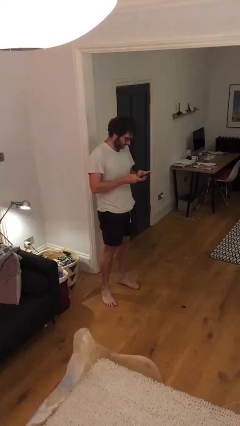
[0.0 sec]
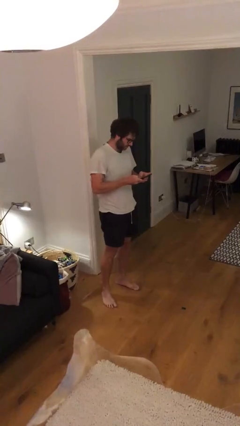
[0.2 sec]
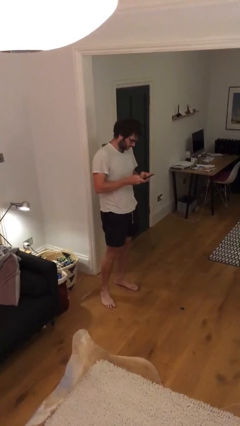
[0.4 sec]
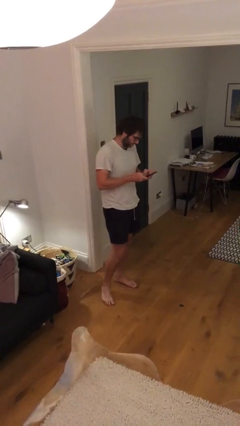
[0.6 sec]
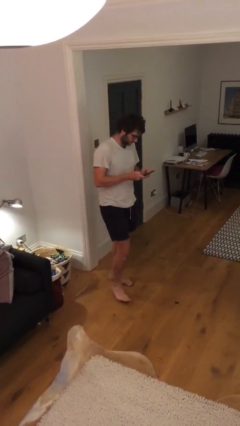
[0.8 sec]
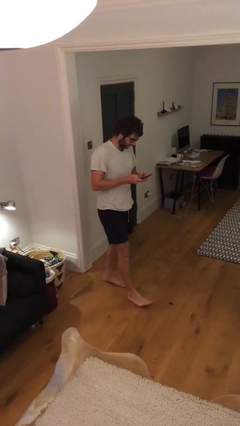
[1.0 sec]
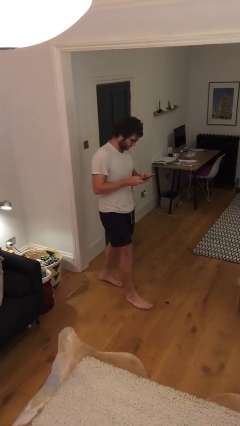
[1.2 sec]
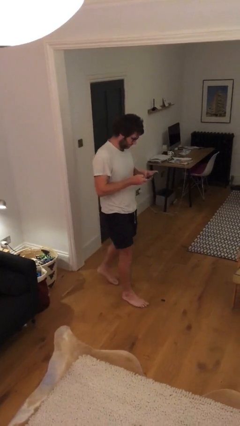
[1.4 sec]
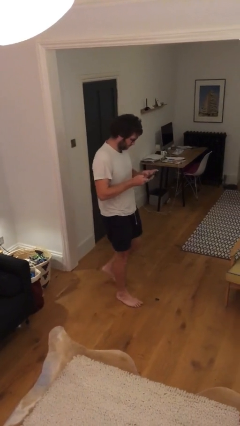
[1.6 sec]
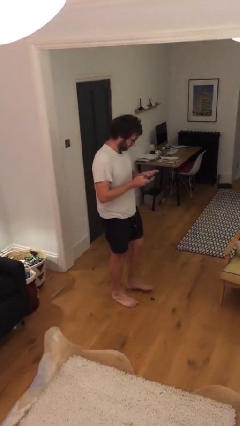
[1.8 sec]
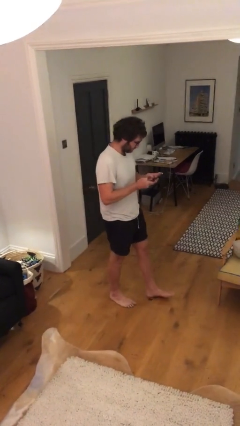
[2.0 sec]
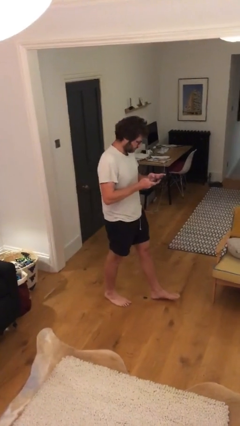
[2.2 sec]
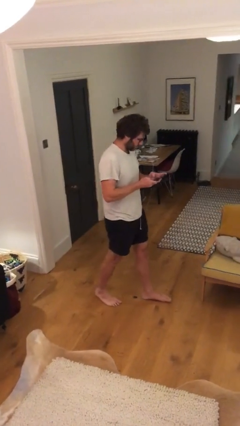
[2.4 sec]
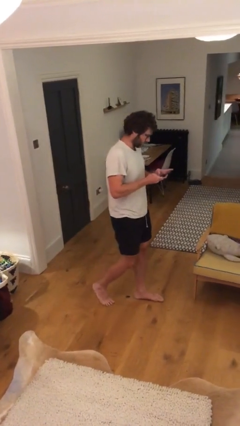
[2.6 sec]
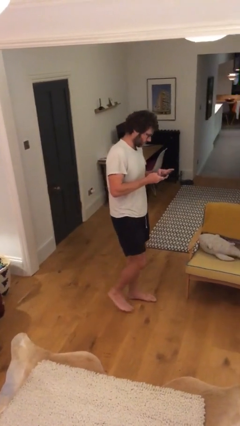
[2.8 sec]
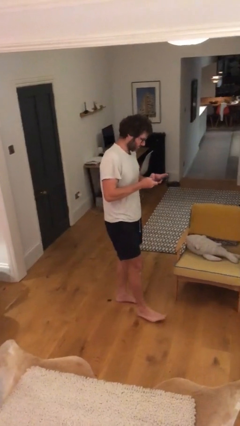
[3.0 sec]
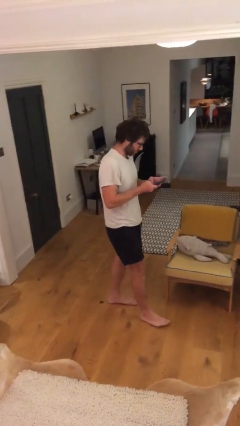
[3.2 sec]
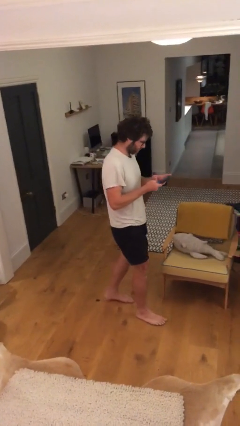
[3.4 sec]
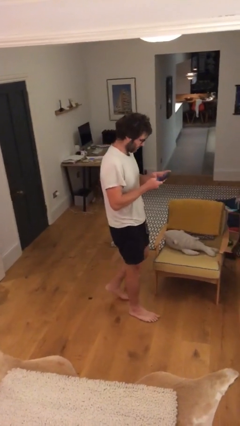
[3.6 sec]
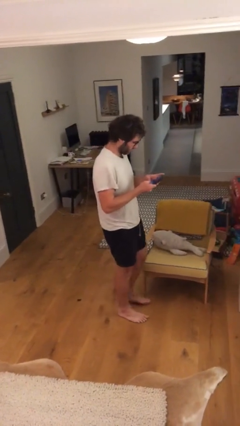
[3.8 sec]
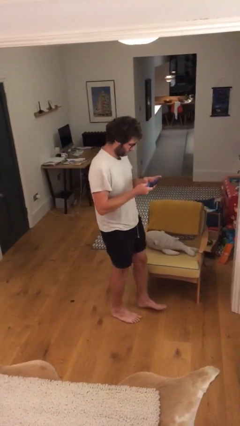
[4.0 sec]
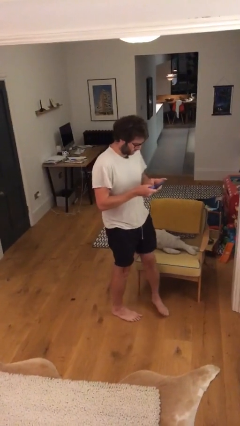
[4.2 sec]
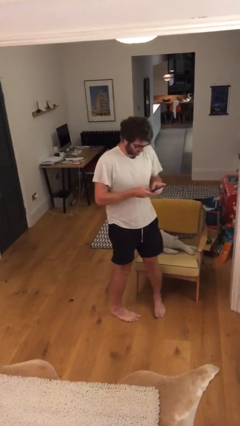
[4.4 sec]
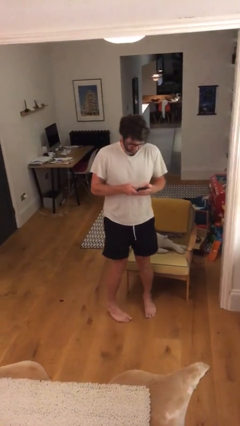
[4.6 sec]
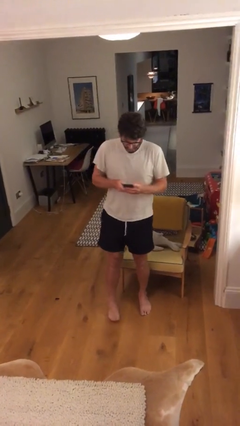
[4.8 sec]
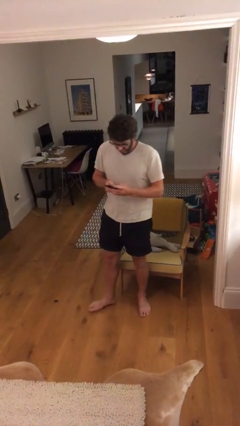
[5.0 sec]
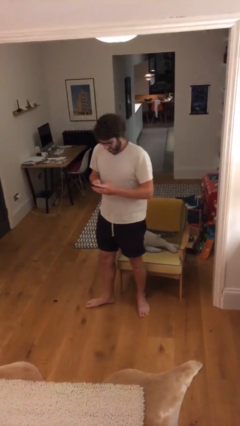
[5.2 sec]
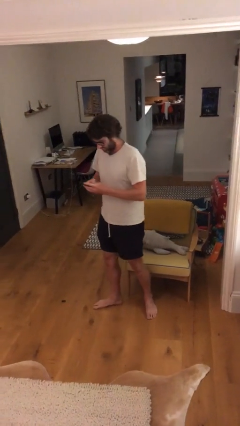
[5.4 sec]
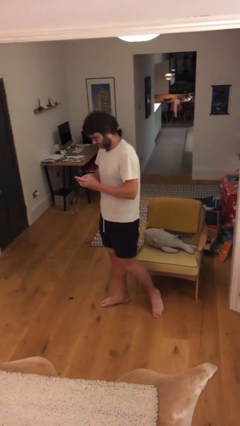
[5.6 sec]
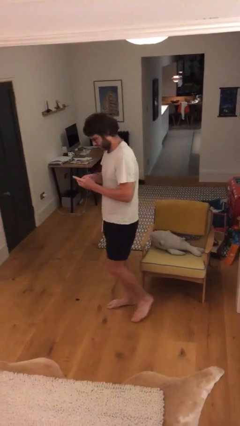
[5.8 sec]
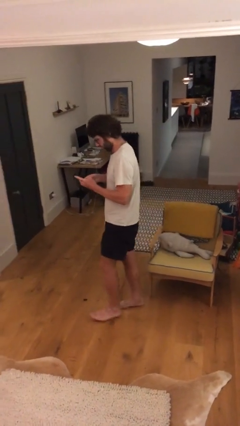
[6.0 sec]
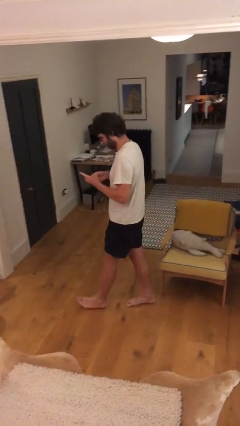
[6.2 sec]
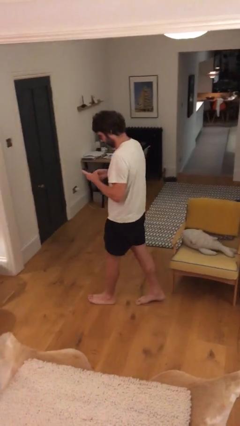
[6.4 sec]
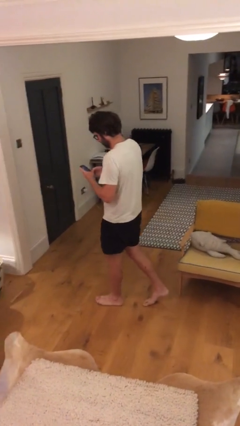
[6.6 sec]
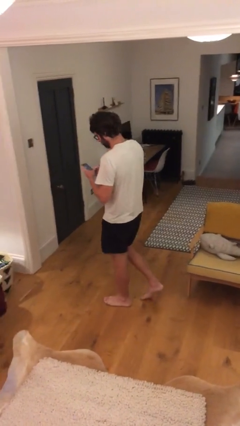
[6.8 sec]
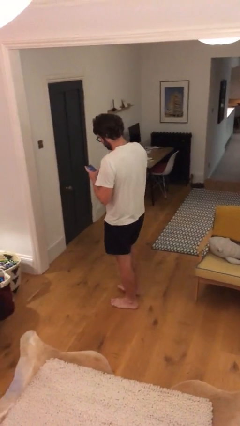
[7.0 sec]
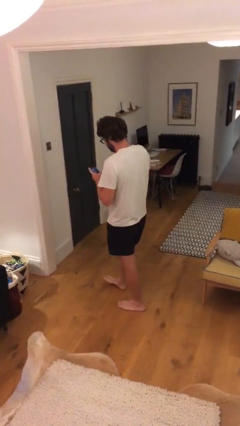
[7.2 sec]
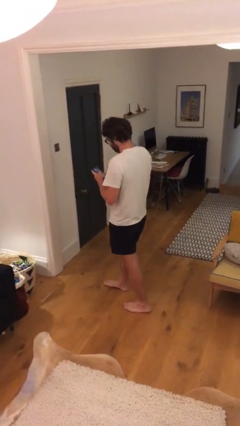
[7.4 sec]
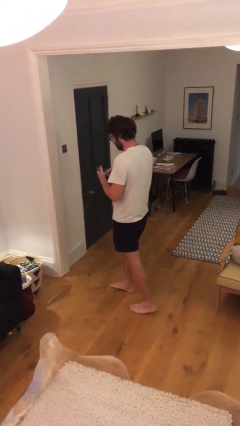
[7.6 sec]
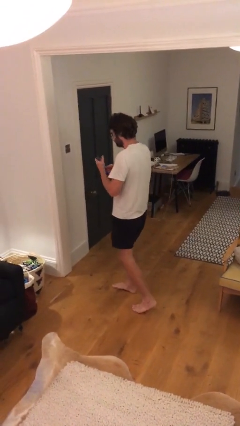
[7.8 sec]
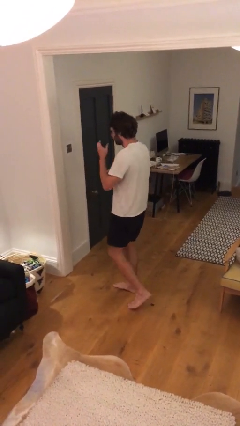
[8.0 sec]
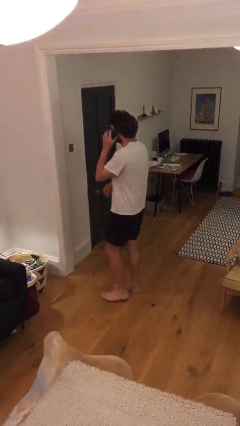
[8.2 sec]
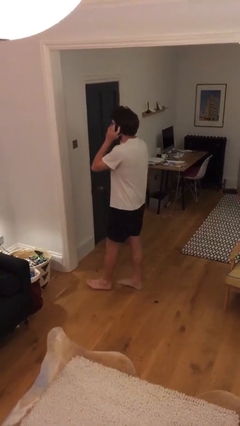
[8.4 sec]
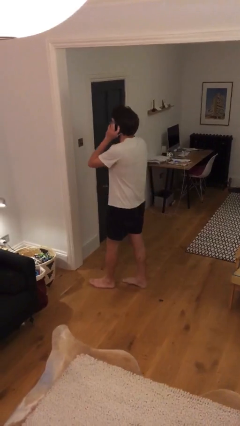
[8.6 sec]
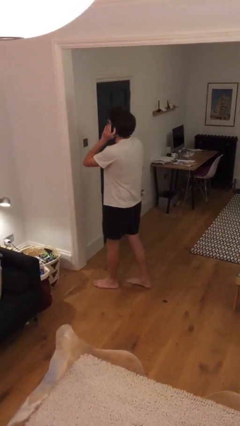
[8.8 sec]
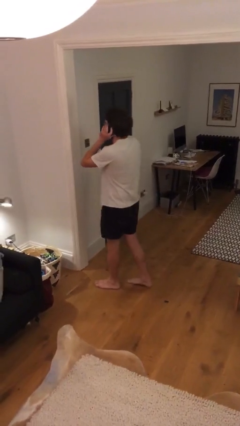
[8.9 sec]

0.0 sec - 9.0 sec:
person texts on phone

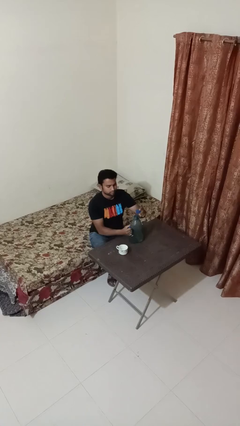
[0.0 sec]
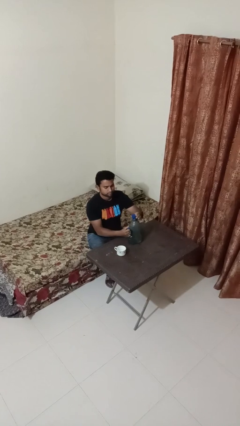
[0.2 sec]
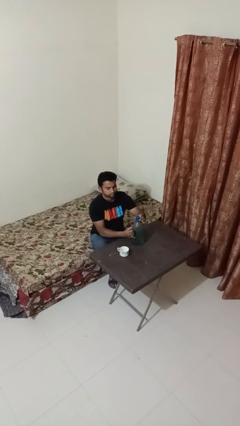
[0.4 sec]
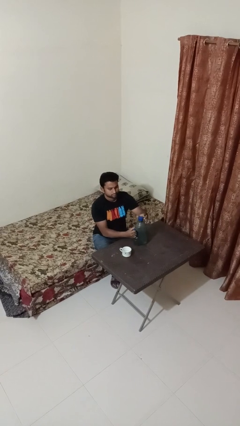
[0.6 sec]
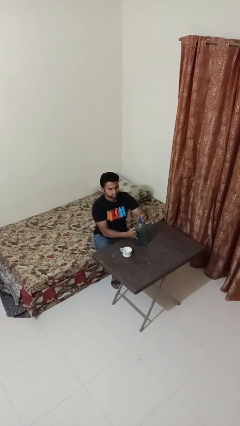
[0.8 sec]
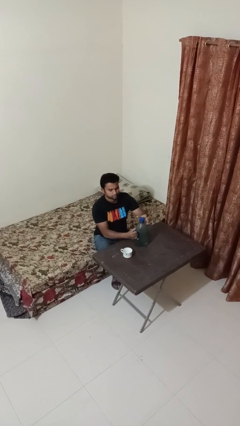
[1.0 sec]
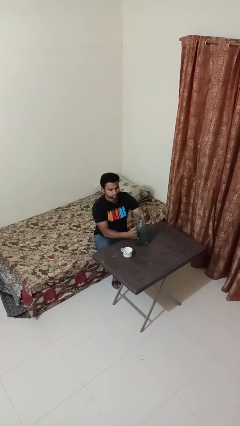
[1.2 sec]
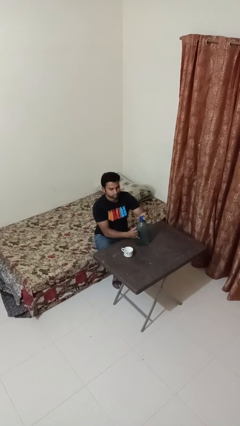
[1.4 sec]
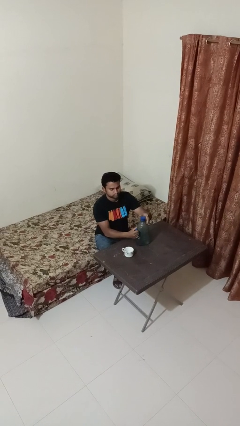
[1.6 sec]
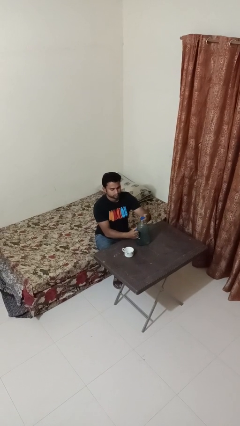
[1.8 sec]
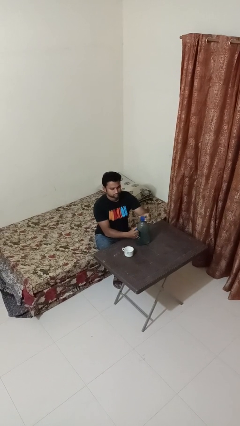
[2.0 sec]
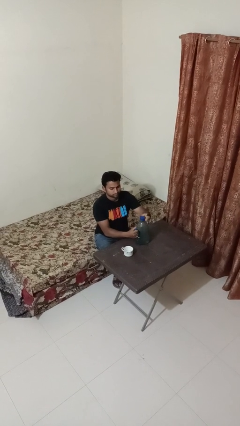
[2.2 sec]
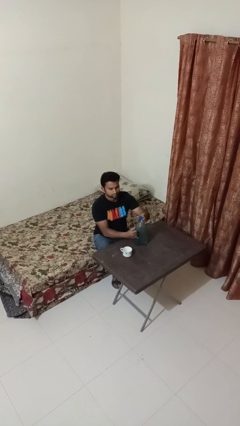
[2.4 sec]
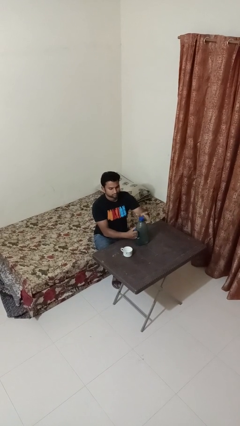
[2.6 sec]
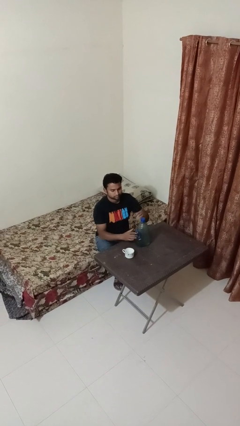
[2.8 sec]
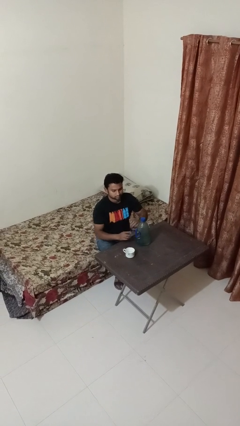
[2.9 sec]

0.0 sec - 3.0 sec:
person screws lid to bottle

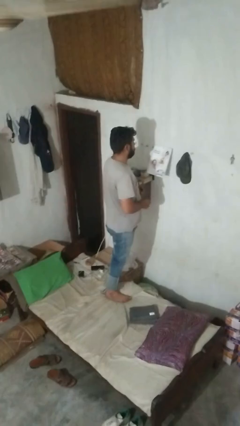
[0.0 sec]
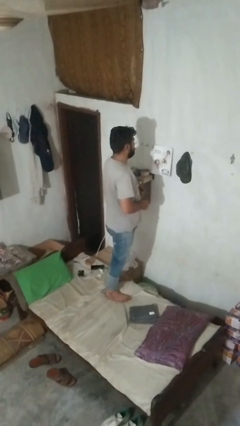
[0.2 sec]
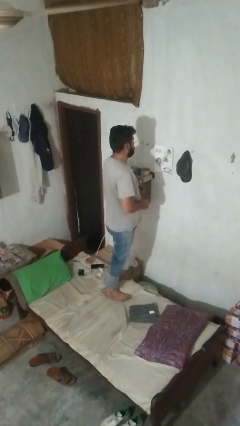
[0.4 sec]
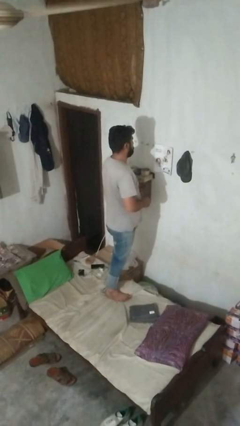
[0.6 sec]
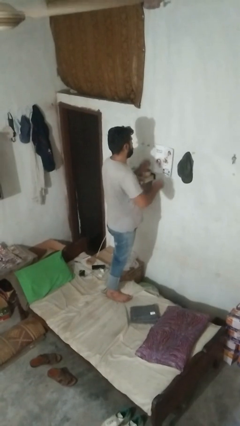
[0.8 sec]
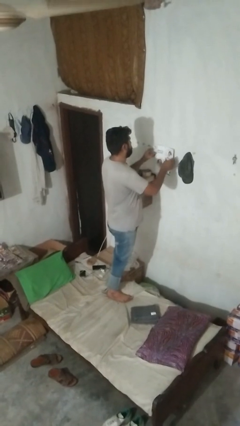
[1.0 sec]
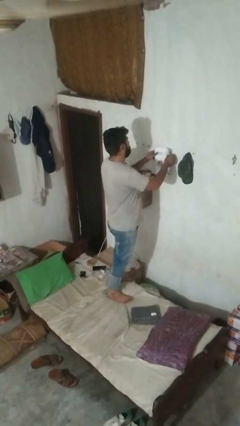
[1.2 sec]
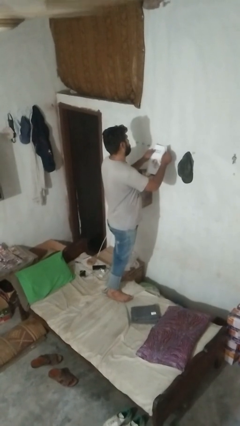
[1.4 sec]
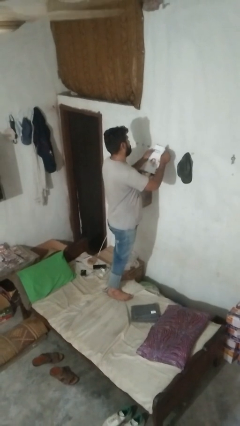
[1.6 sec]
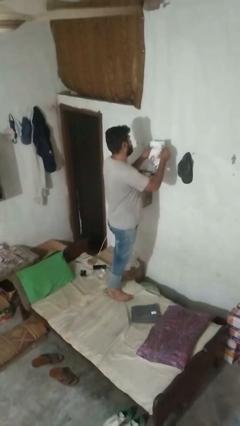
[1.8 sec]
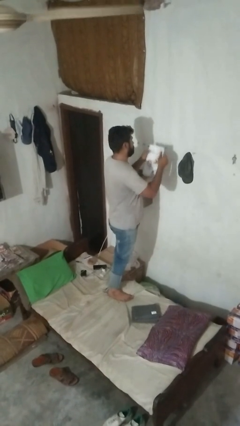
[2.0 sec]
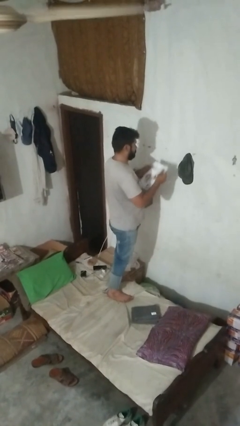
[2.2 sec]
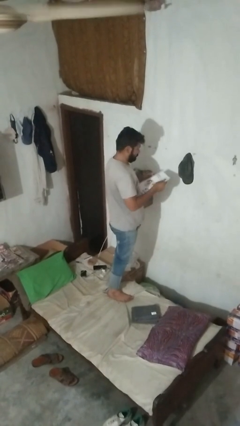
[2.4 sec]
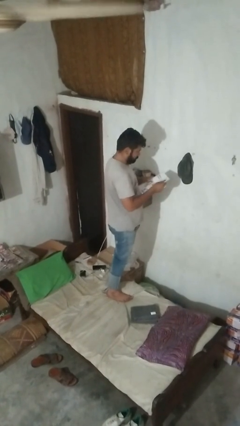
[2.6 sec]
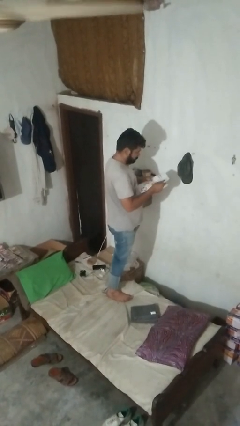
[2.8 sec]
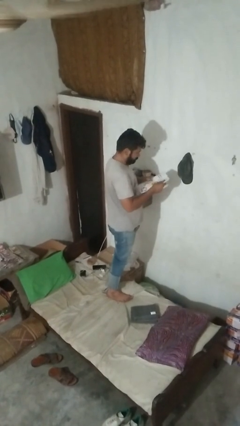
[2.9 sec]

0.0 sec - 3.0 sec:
person takes down picture frame

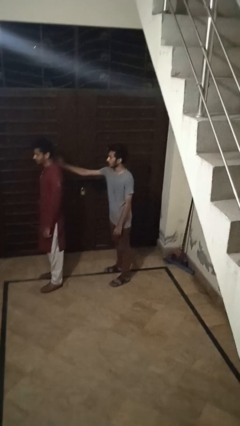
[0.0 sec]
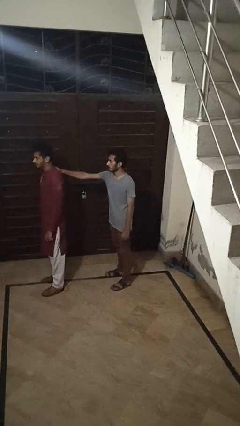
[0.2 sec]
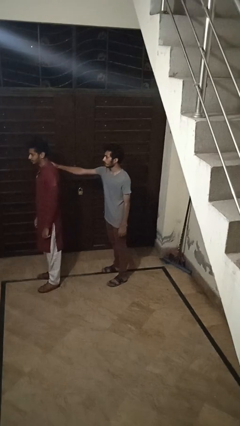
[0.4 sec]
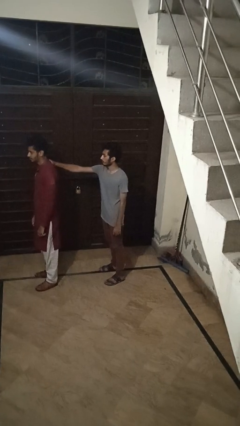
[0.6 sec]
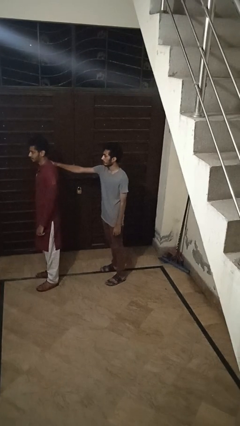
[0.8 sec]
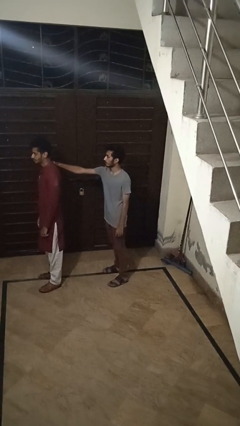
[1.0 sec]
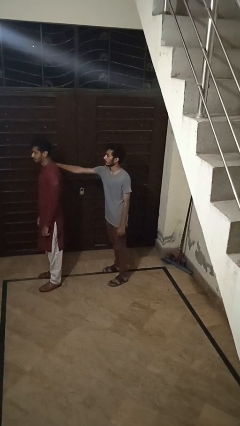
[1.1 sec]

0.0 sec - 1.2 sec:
person grabs person by shoulder

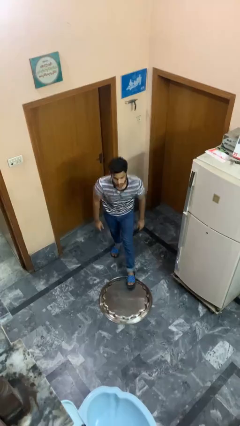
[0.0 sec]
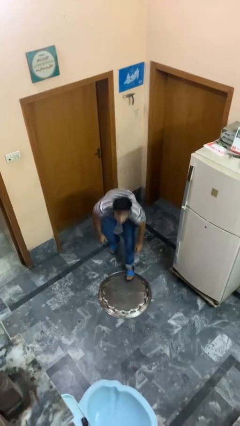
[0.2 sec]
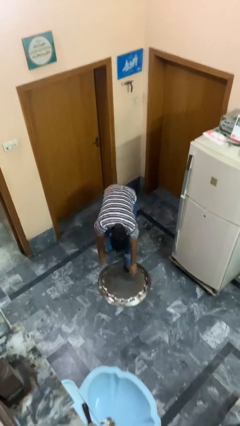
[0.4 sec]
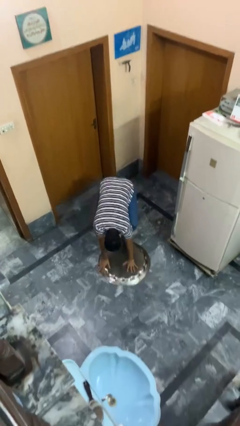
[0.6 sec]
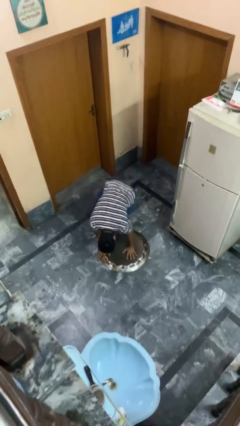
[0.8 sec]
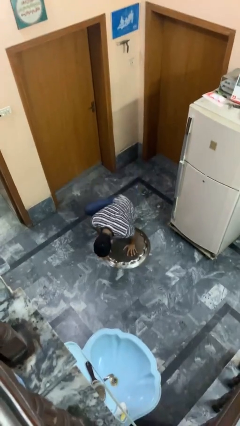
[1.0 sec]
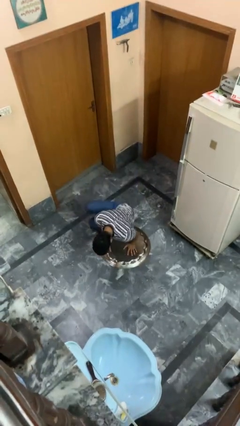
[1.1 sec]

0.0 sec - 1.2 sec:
person trips on object on floor
